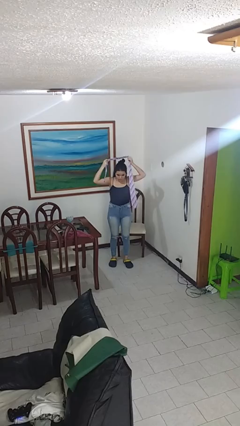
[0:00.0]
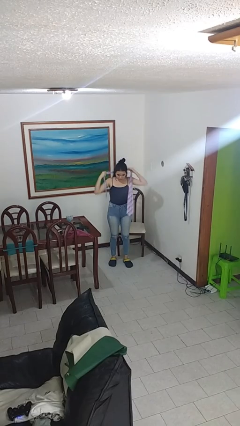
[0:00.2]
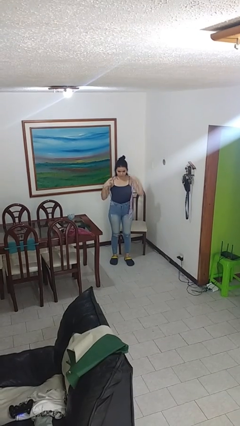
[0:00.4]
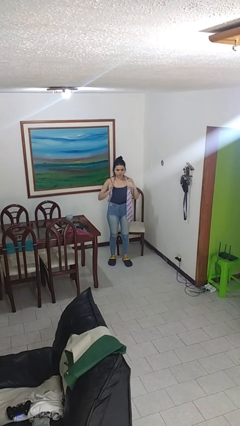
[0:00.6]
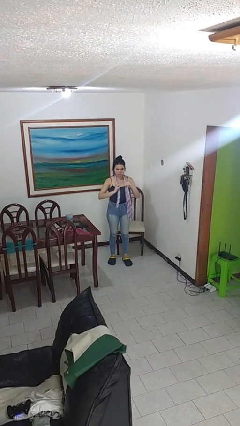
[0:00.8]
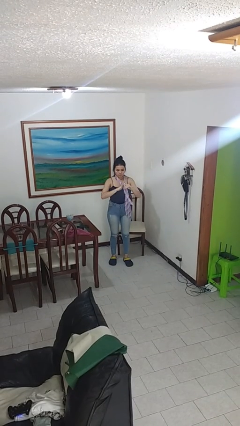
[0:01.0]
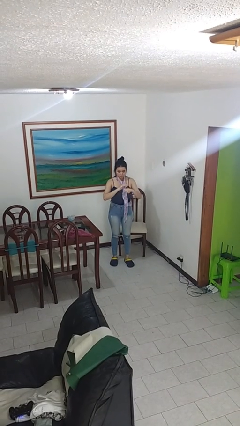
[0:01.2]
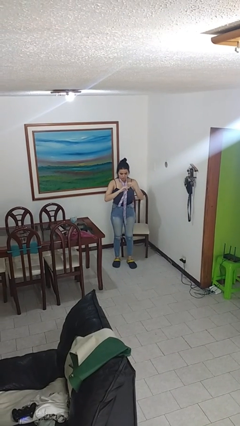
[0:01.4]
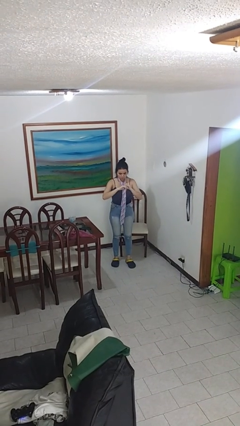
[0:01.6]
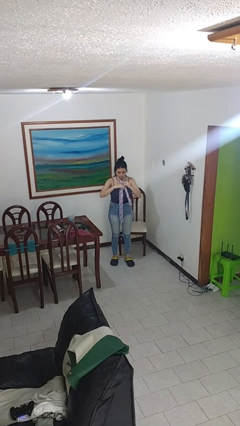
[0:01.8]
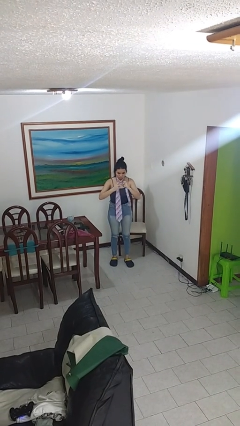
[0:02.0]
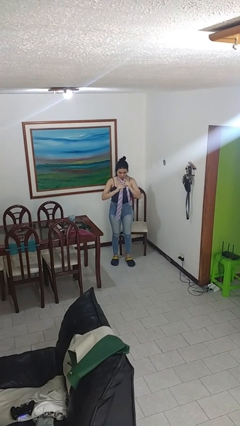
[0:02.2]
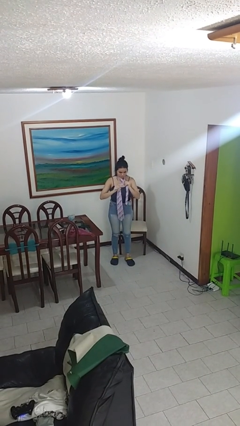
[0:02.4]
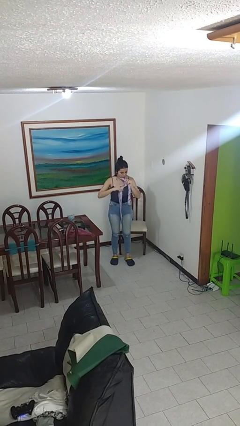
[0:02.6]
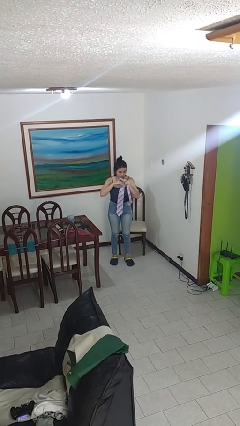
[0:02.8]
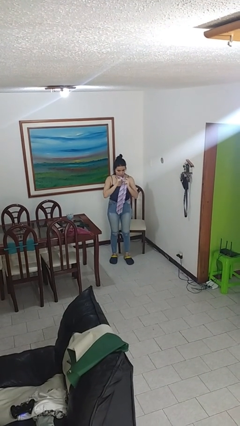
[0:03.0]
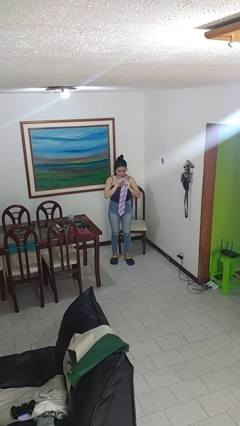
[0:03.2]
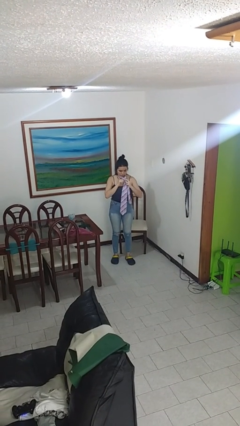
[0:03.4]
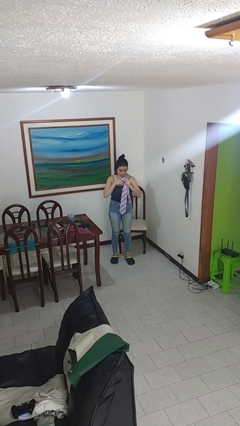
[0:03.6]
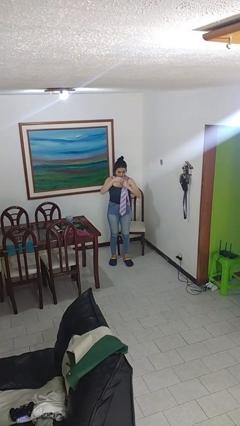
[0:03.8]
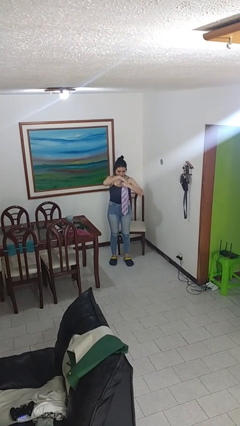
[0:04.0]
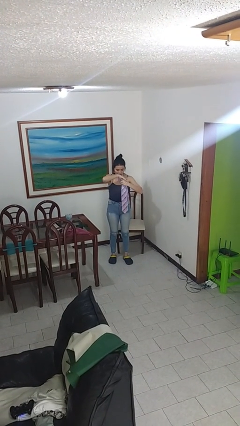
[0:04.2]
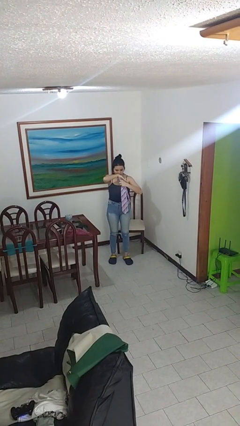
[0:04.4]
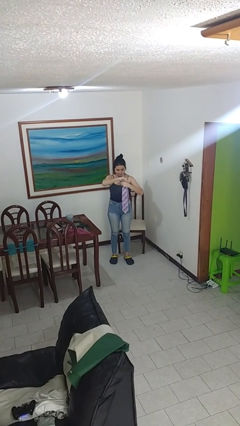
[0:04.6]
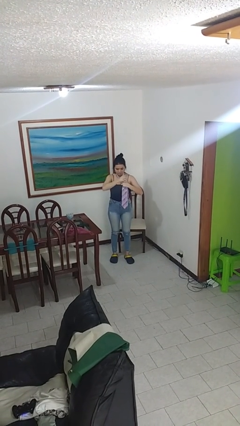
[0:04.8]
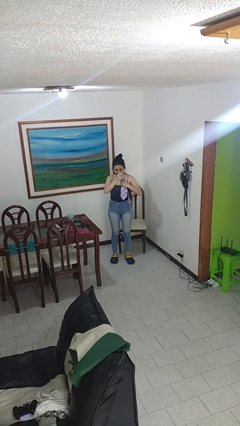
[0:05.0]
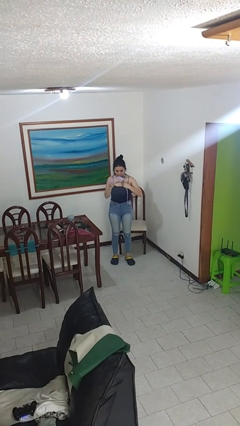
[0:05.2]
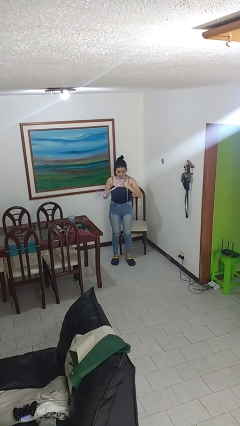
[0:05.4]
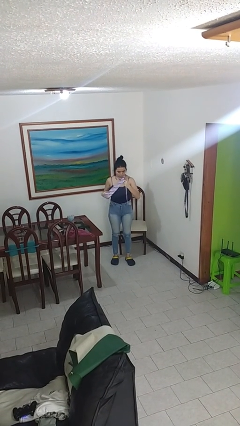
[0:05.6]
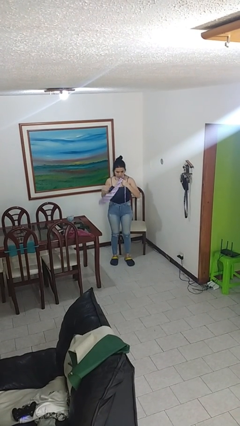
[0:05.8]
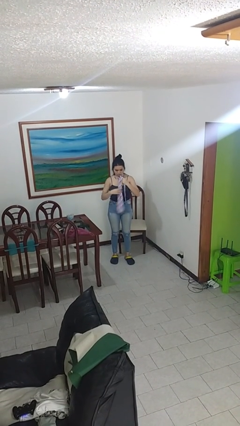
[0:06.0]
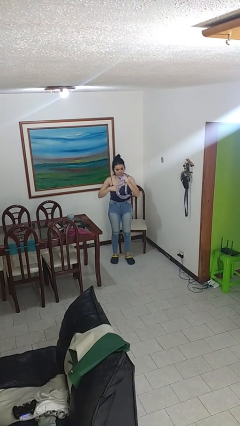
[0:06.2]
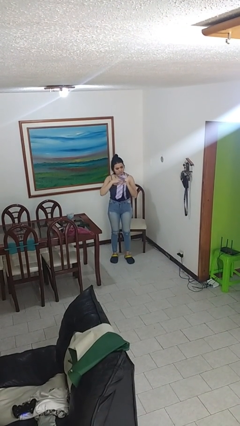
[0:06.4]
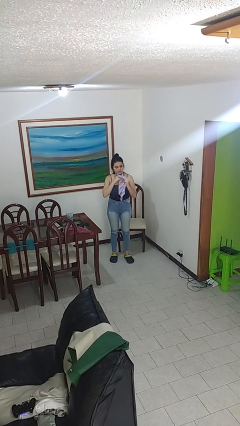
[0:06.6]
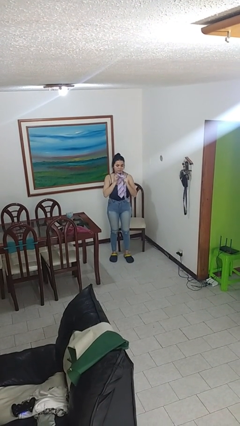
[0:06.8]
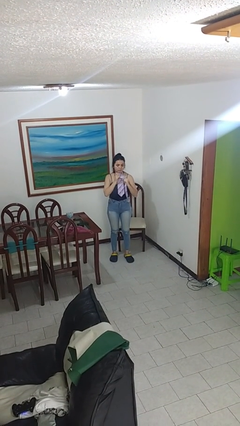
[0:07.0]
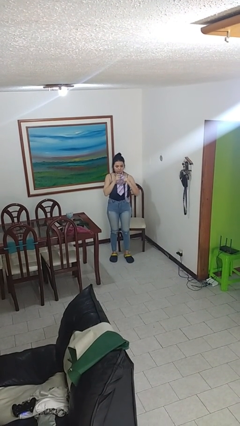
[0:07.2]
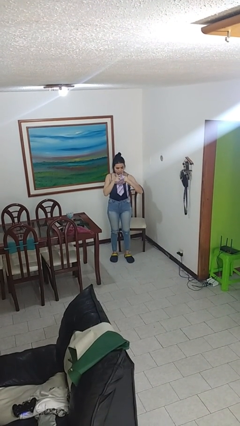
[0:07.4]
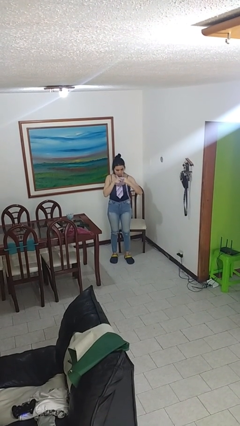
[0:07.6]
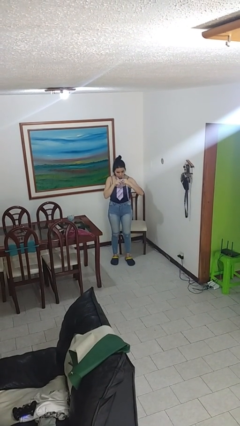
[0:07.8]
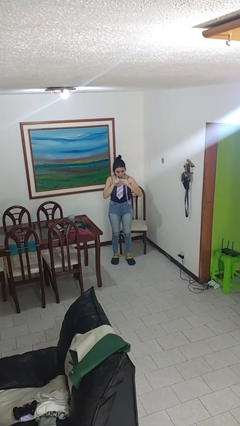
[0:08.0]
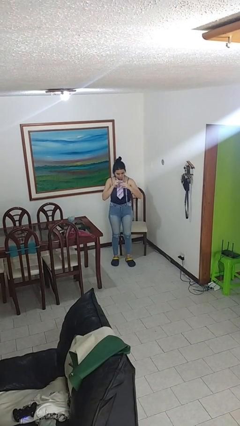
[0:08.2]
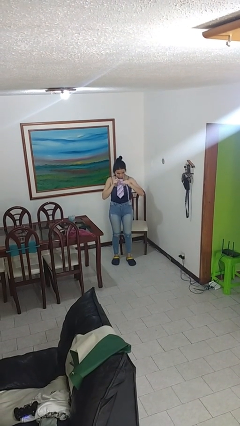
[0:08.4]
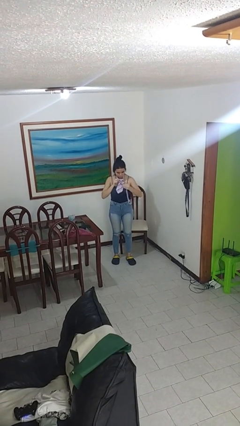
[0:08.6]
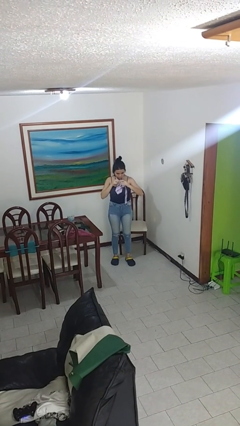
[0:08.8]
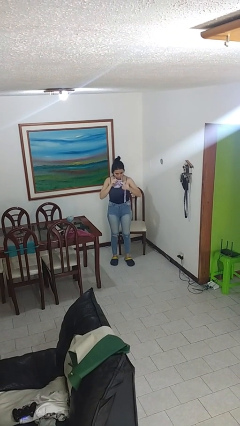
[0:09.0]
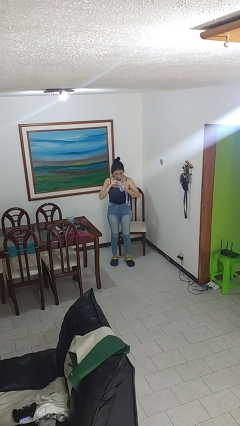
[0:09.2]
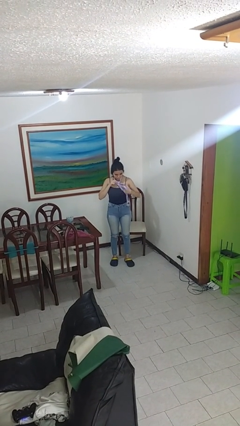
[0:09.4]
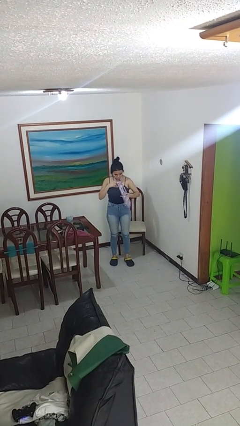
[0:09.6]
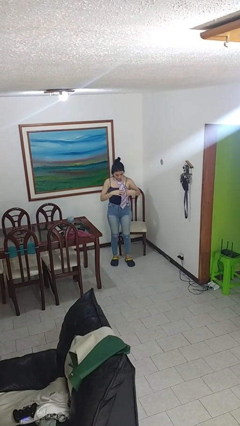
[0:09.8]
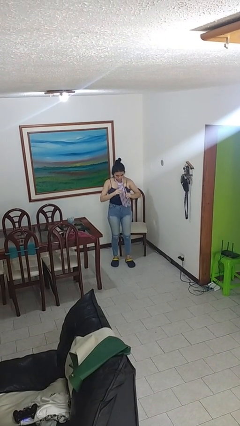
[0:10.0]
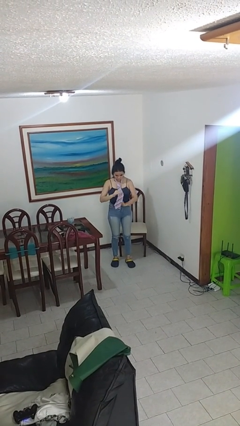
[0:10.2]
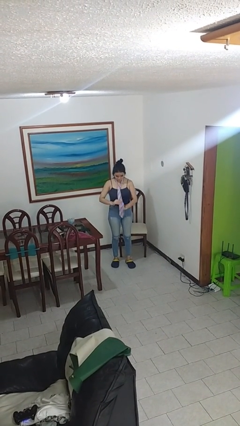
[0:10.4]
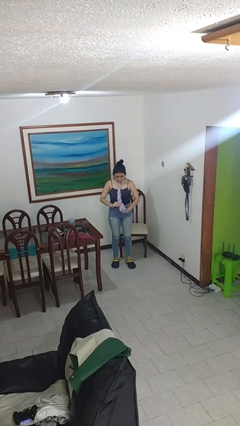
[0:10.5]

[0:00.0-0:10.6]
person puts on necktie

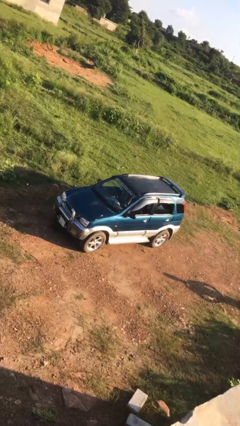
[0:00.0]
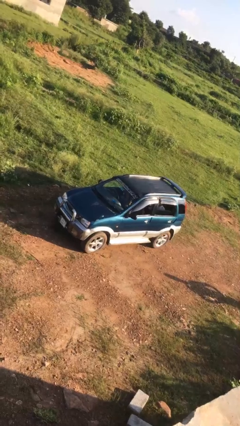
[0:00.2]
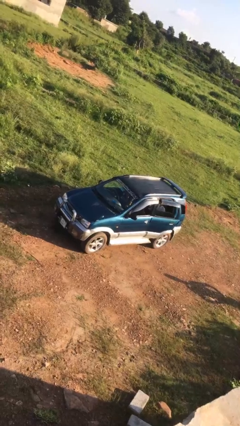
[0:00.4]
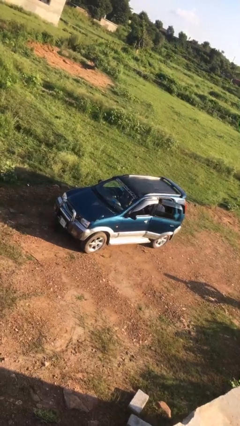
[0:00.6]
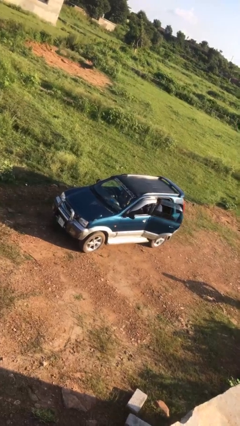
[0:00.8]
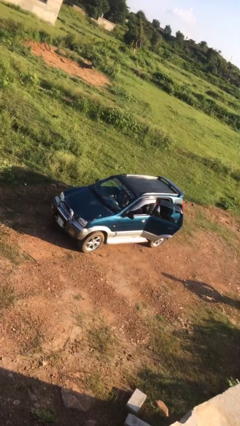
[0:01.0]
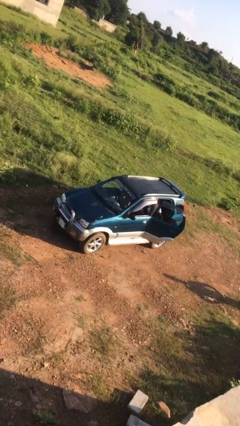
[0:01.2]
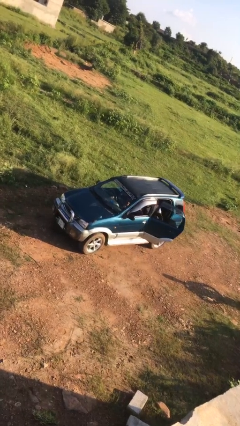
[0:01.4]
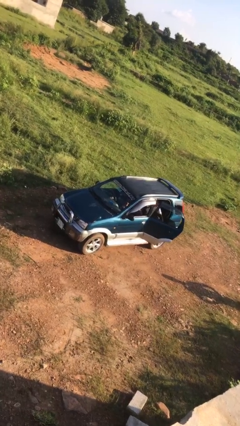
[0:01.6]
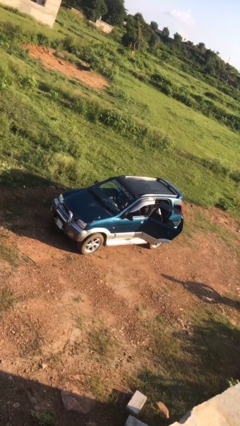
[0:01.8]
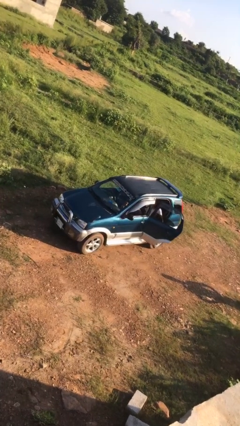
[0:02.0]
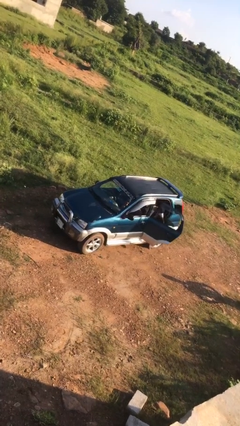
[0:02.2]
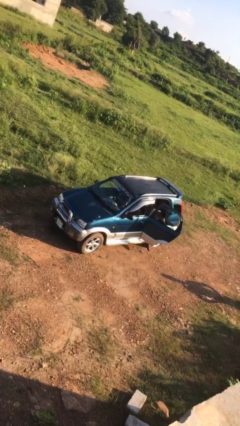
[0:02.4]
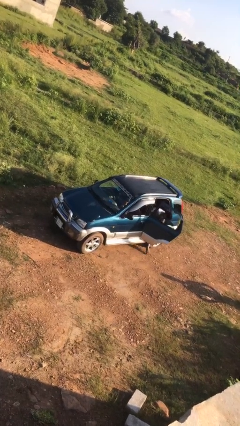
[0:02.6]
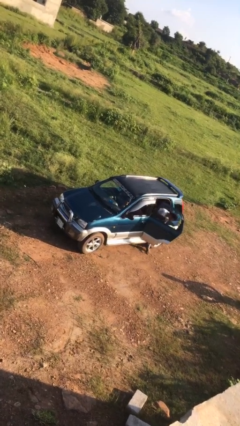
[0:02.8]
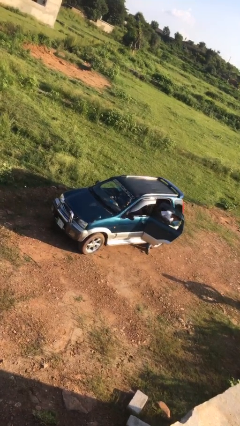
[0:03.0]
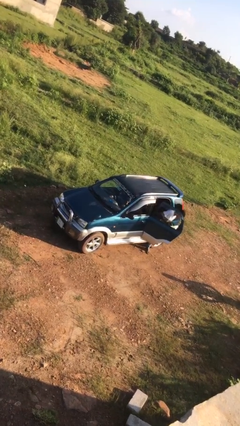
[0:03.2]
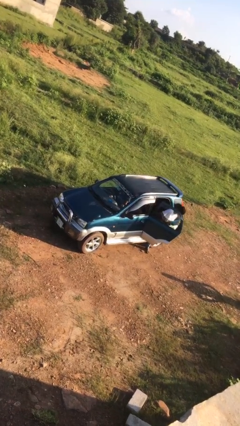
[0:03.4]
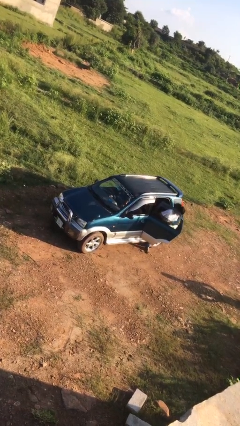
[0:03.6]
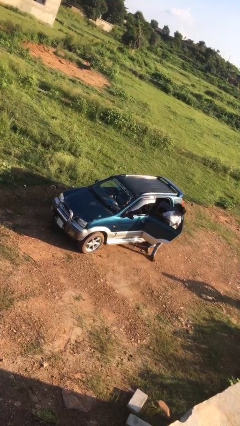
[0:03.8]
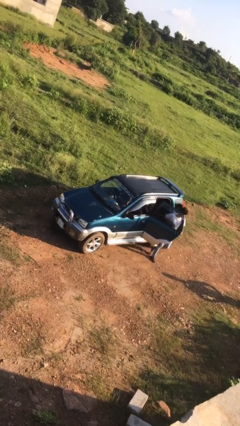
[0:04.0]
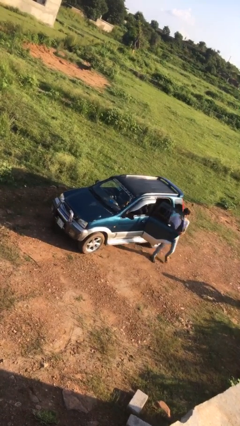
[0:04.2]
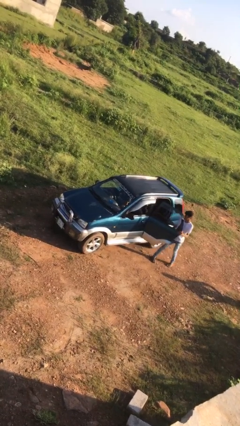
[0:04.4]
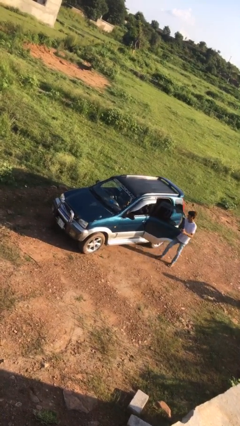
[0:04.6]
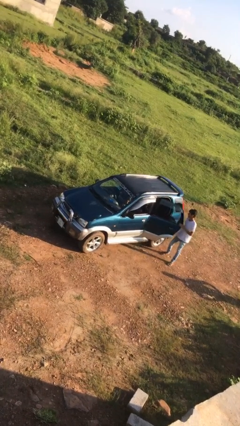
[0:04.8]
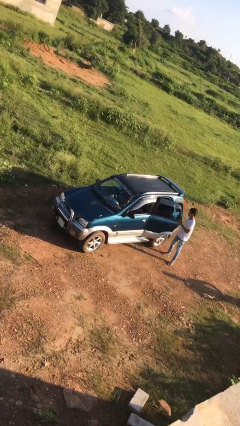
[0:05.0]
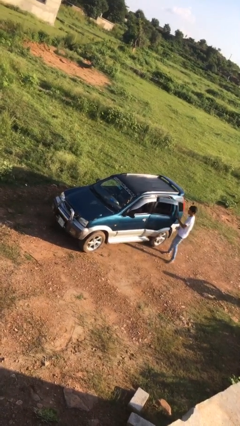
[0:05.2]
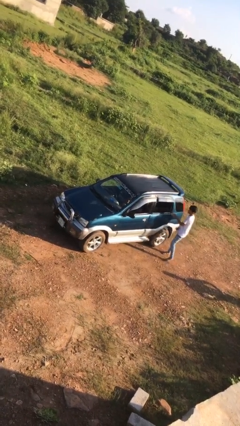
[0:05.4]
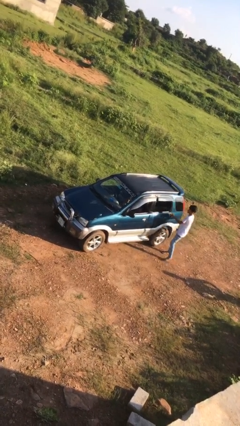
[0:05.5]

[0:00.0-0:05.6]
car drops off person

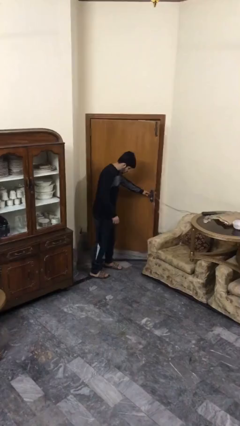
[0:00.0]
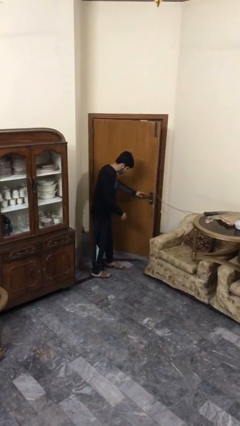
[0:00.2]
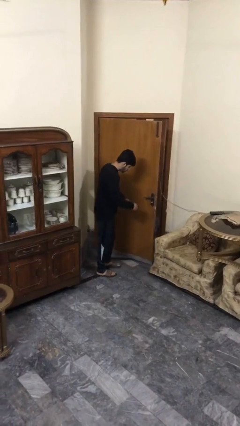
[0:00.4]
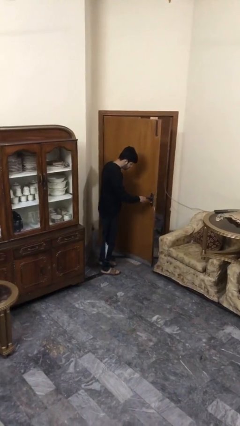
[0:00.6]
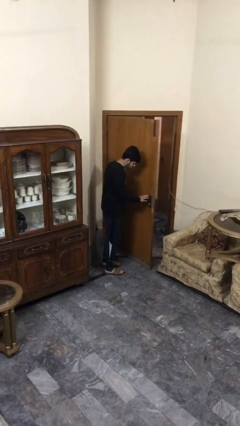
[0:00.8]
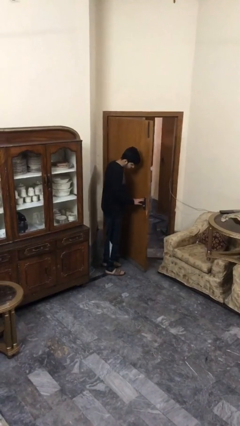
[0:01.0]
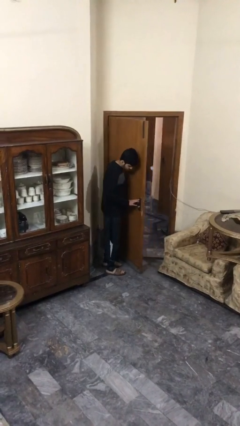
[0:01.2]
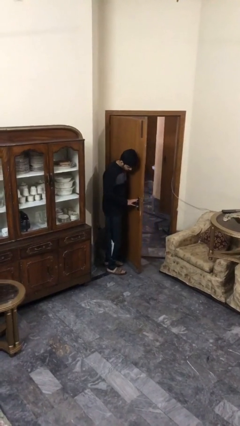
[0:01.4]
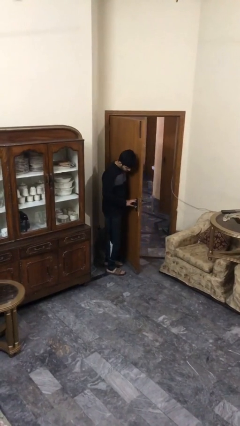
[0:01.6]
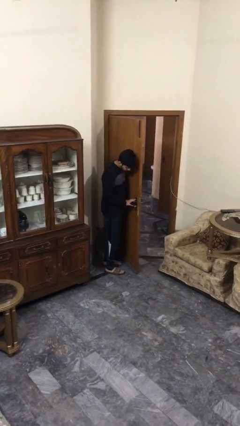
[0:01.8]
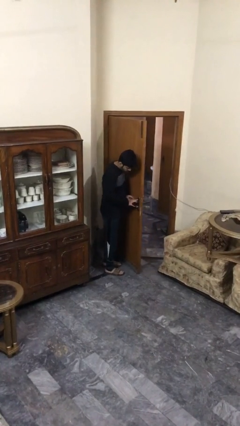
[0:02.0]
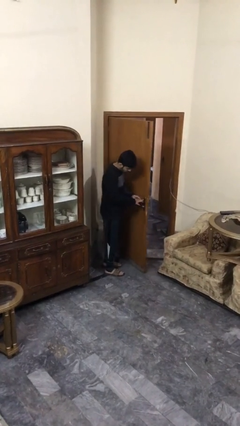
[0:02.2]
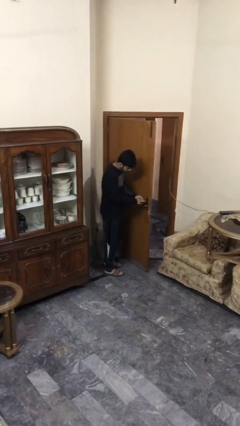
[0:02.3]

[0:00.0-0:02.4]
person opens facility door
